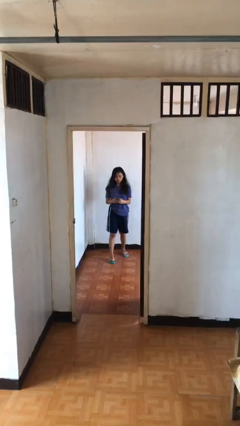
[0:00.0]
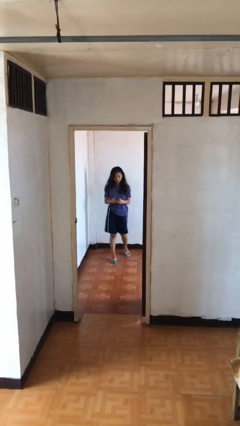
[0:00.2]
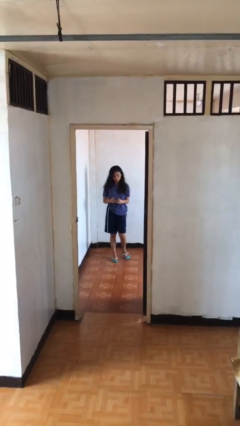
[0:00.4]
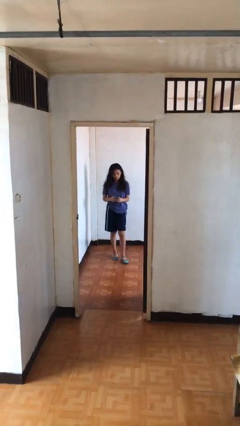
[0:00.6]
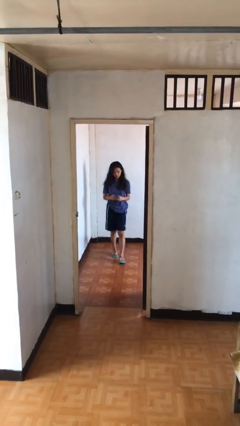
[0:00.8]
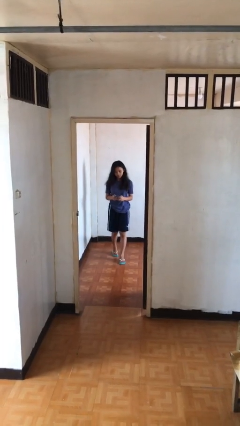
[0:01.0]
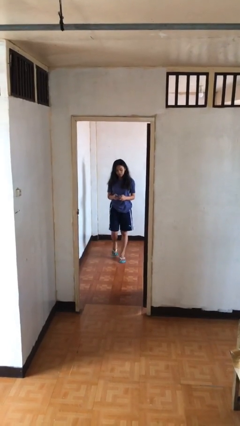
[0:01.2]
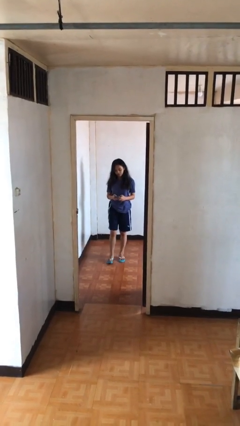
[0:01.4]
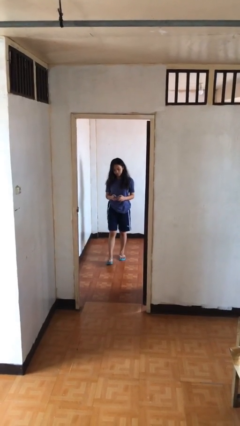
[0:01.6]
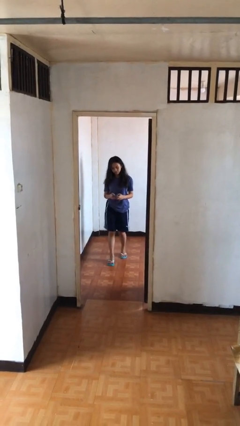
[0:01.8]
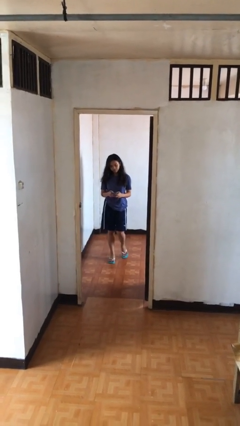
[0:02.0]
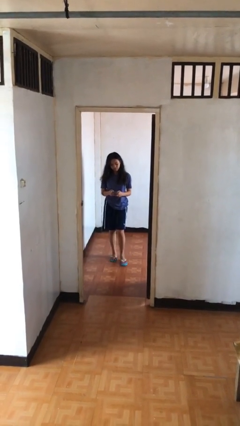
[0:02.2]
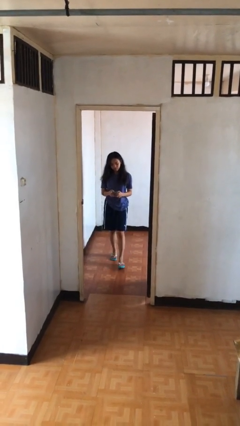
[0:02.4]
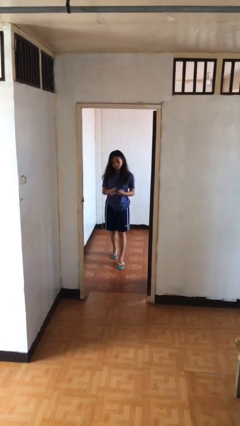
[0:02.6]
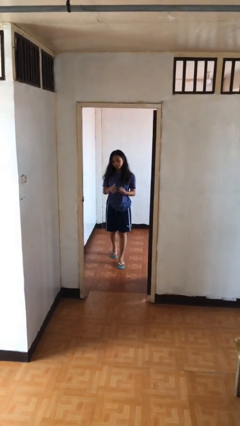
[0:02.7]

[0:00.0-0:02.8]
person texts on phone

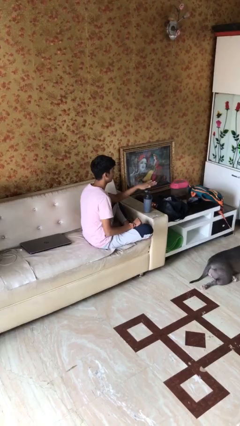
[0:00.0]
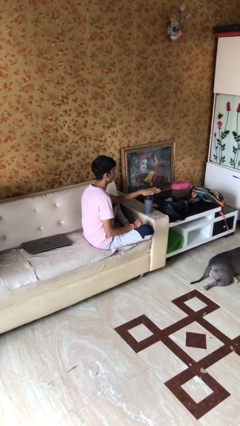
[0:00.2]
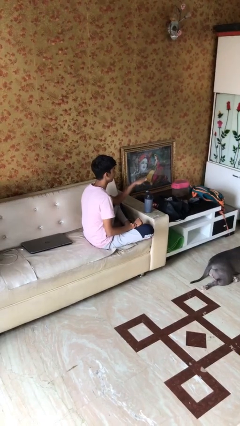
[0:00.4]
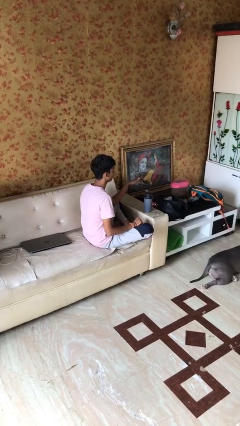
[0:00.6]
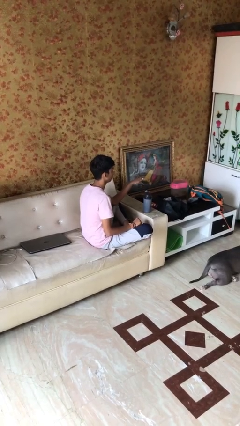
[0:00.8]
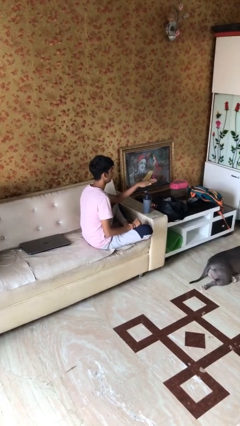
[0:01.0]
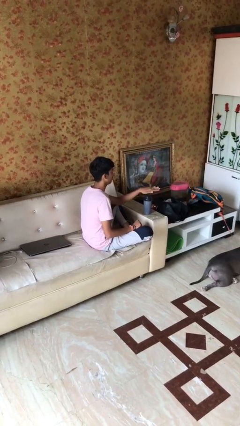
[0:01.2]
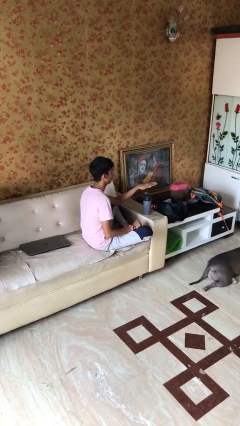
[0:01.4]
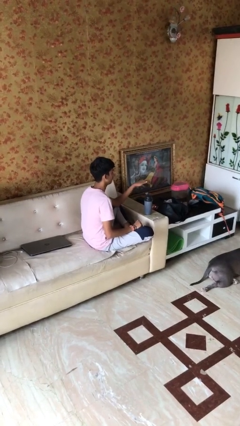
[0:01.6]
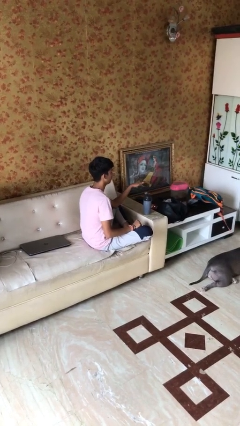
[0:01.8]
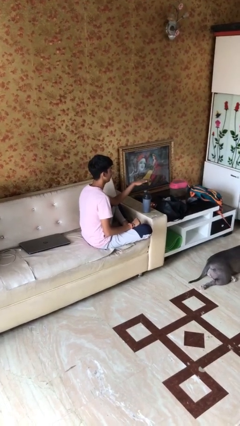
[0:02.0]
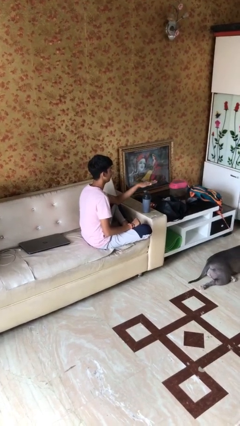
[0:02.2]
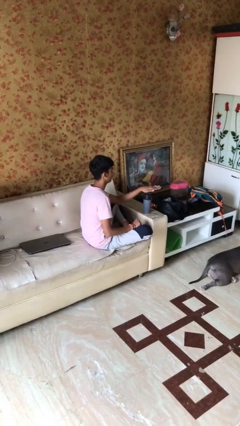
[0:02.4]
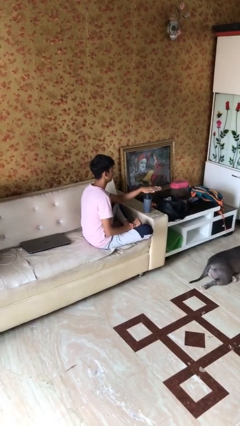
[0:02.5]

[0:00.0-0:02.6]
person waves hand over object

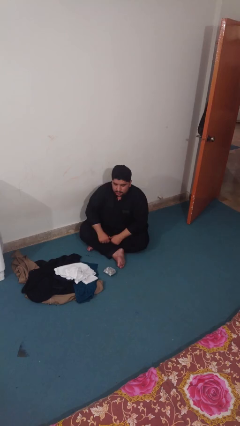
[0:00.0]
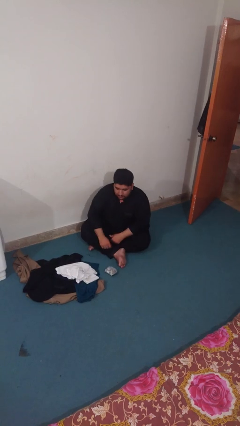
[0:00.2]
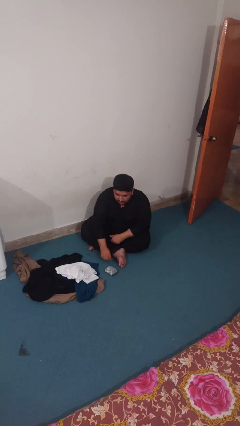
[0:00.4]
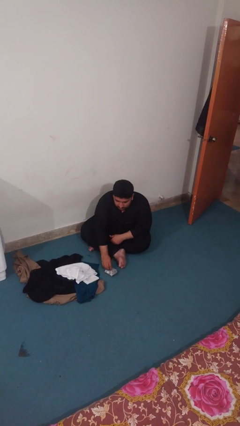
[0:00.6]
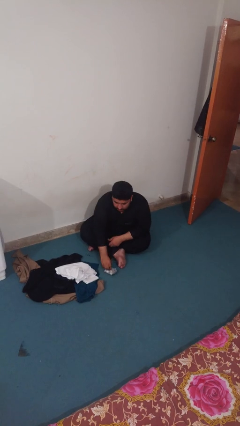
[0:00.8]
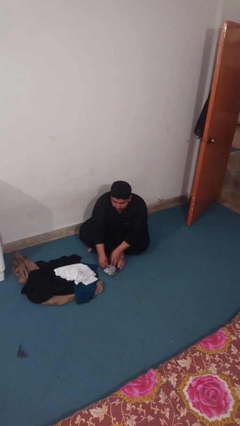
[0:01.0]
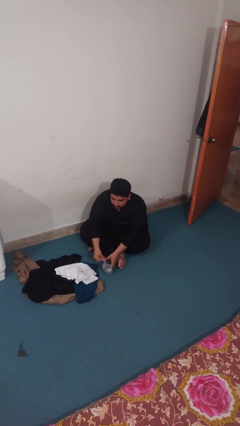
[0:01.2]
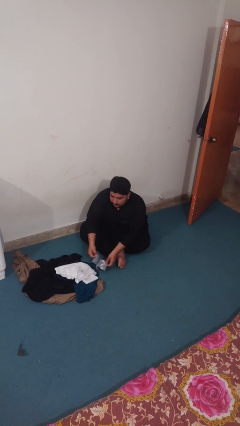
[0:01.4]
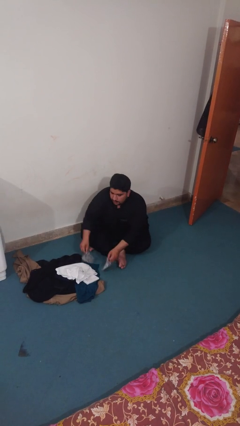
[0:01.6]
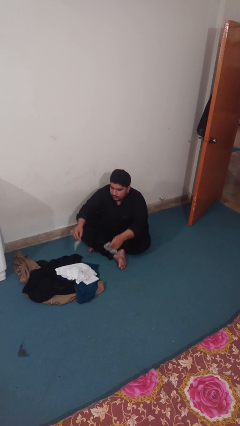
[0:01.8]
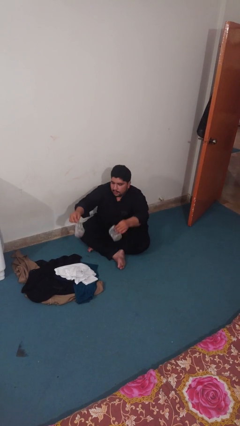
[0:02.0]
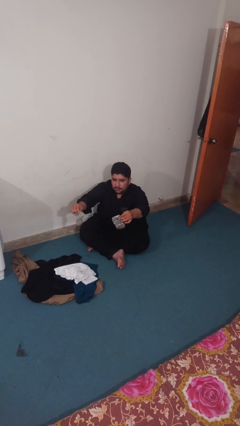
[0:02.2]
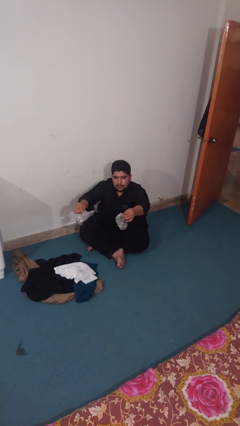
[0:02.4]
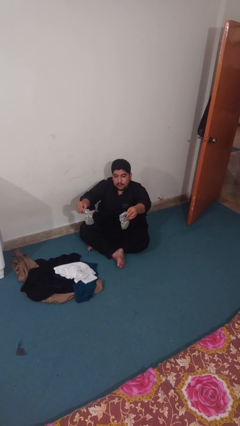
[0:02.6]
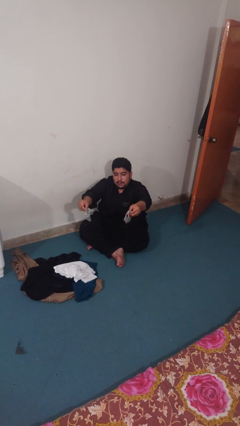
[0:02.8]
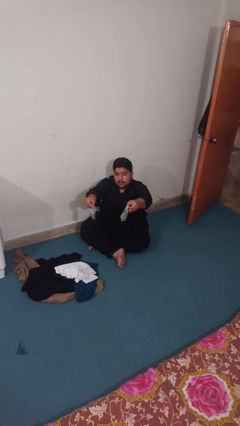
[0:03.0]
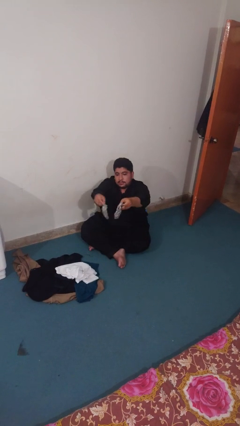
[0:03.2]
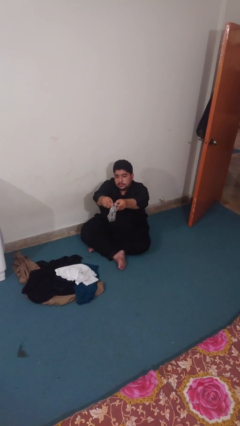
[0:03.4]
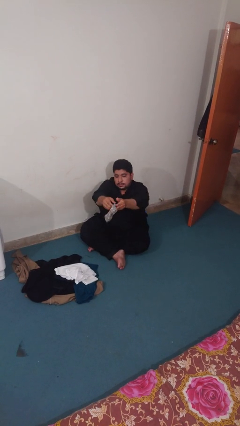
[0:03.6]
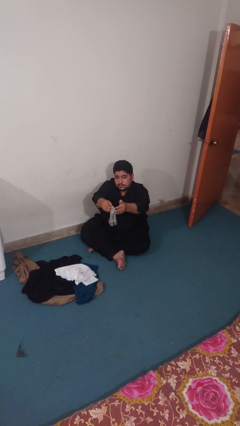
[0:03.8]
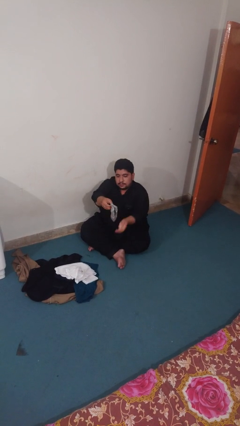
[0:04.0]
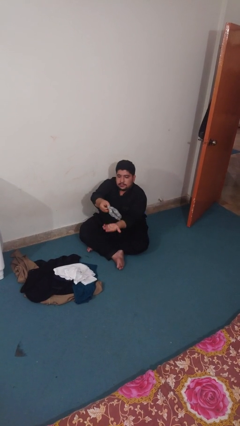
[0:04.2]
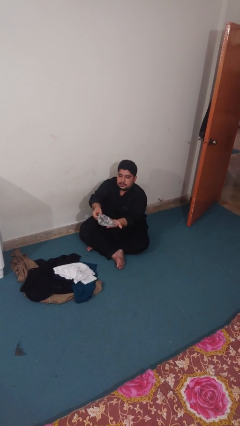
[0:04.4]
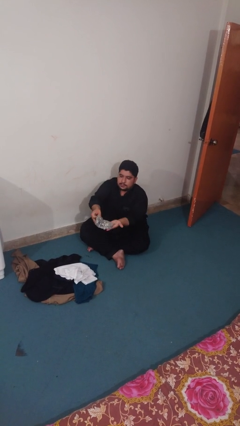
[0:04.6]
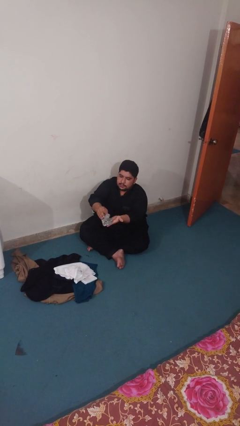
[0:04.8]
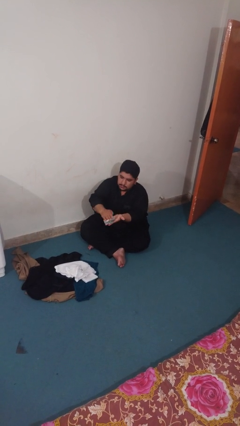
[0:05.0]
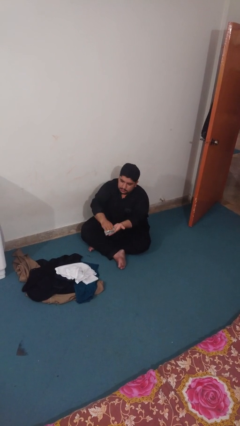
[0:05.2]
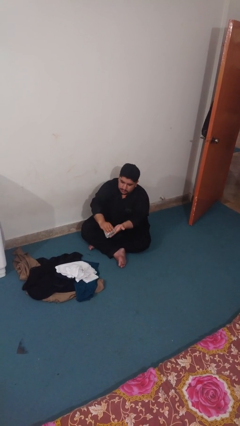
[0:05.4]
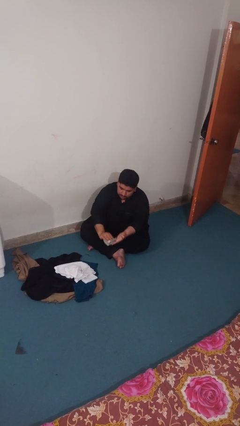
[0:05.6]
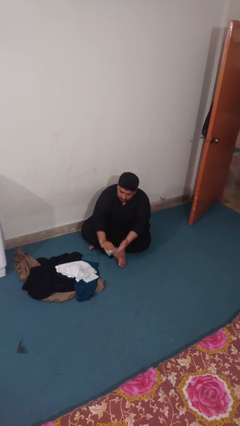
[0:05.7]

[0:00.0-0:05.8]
person folds socks

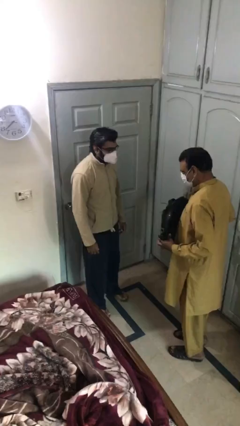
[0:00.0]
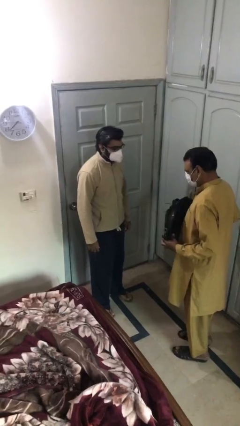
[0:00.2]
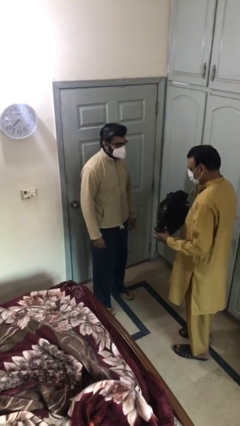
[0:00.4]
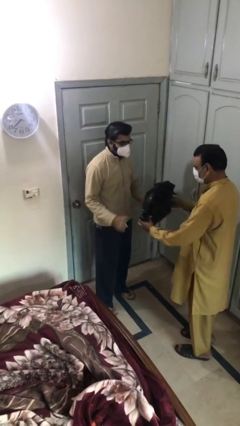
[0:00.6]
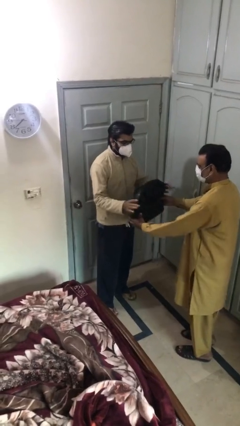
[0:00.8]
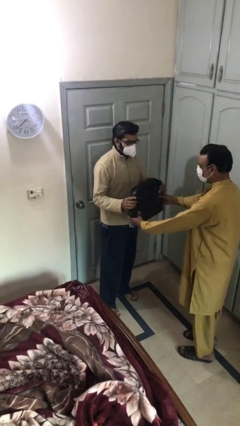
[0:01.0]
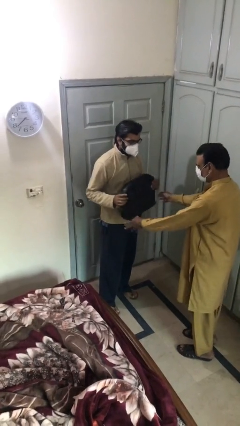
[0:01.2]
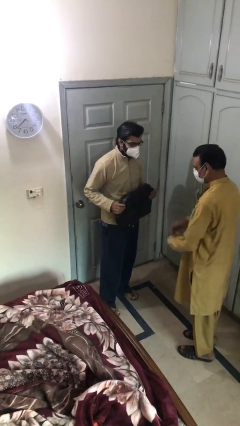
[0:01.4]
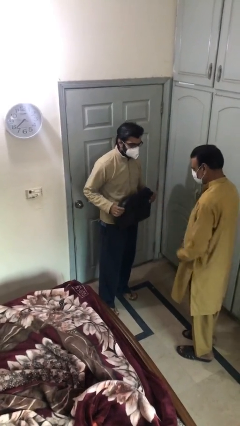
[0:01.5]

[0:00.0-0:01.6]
person transfers object to person

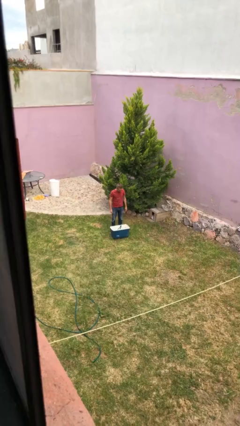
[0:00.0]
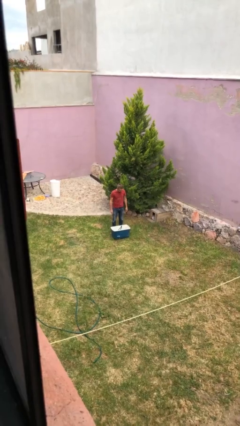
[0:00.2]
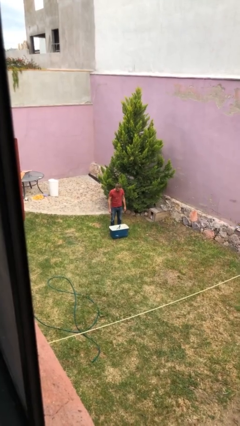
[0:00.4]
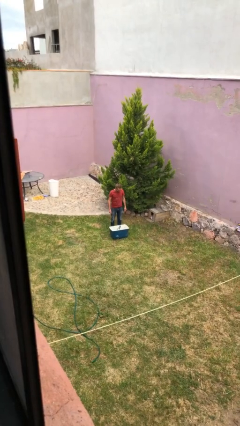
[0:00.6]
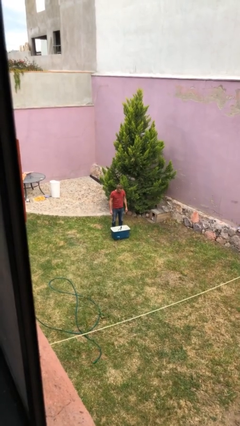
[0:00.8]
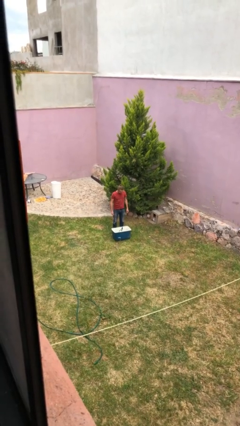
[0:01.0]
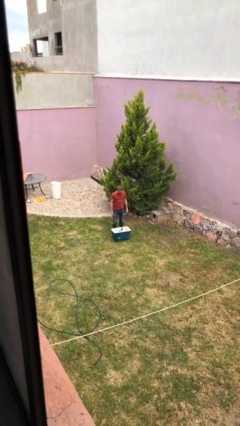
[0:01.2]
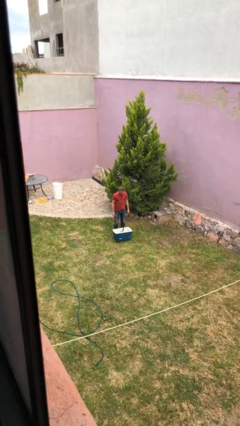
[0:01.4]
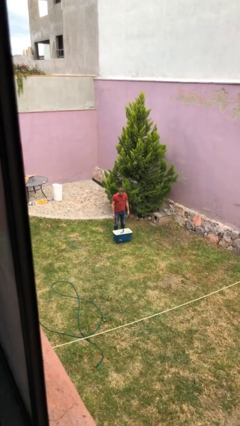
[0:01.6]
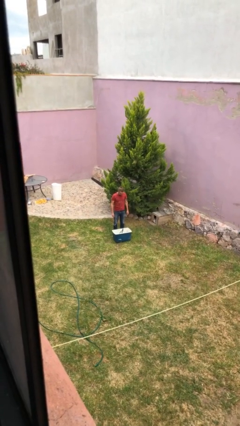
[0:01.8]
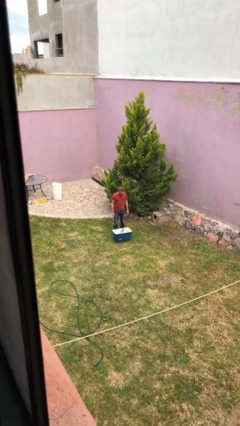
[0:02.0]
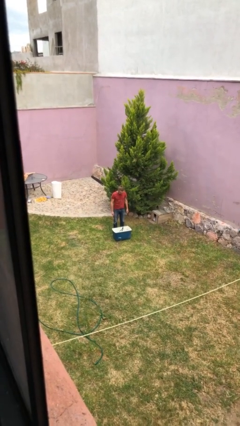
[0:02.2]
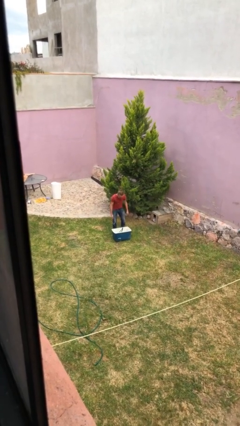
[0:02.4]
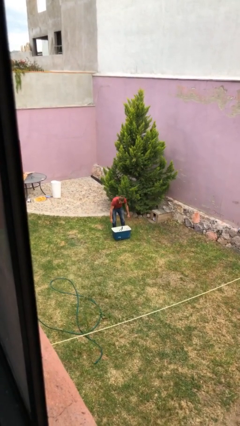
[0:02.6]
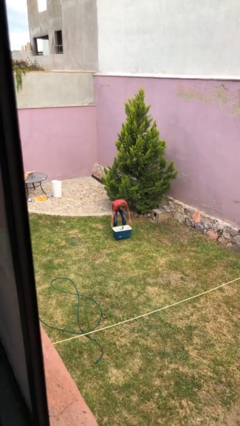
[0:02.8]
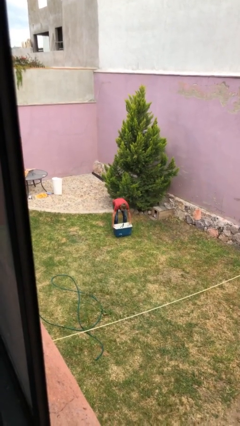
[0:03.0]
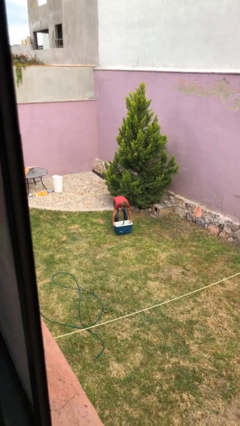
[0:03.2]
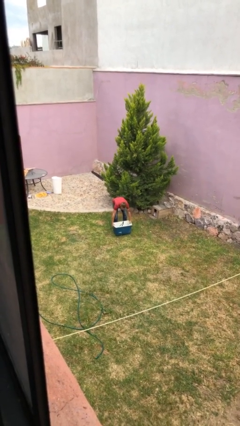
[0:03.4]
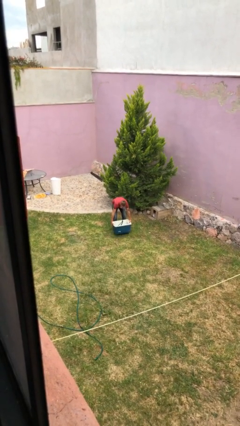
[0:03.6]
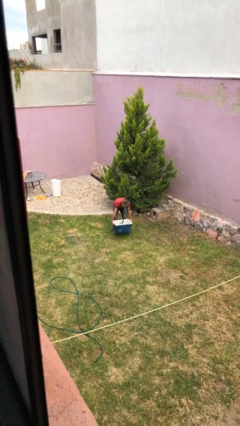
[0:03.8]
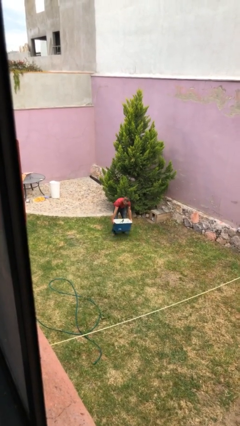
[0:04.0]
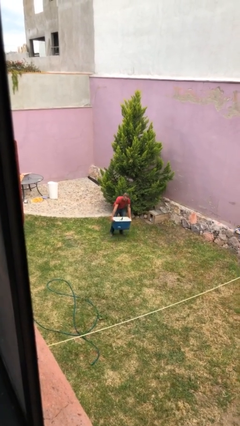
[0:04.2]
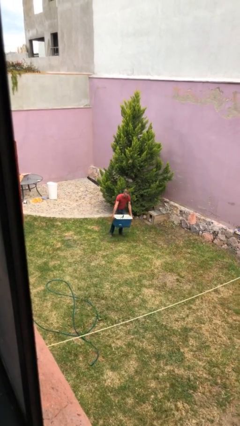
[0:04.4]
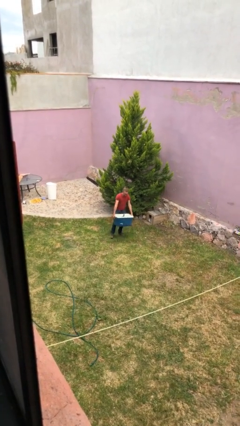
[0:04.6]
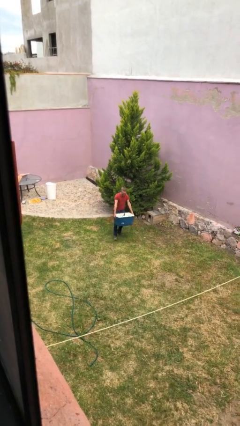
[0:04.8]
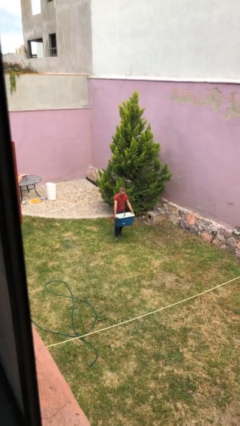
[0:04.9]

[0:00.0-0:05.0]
person picks up object from floor

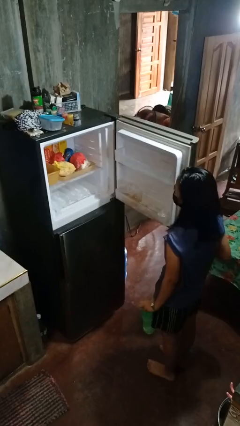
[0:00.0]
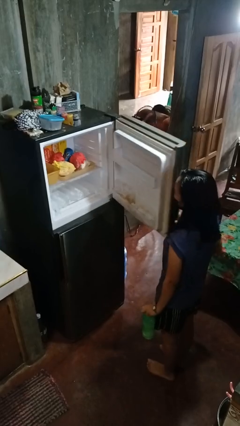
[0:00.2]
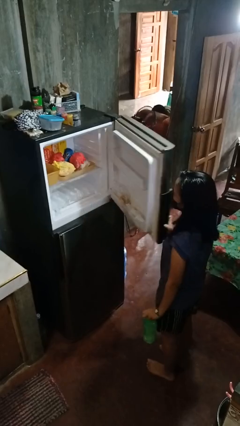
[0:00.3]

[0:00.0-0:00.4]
person closes refrigerator
